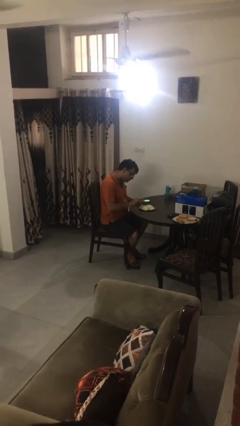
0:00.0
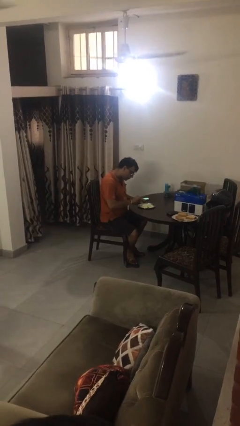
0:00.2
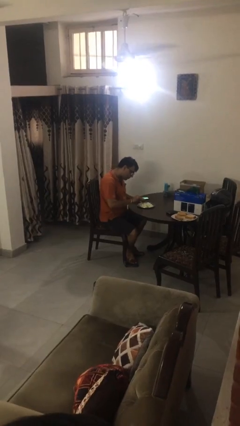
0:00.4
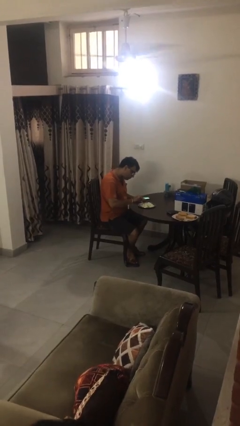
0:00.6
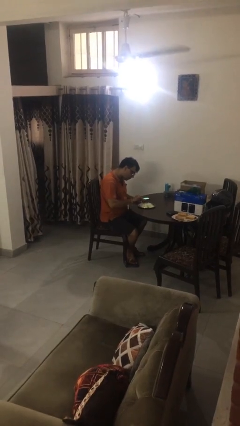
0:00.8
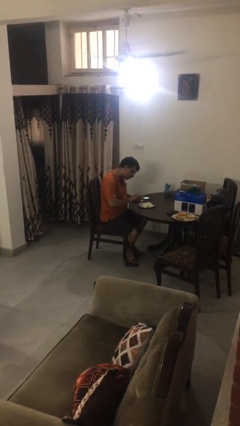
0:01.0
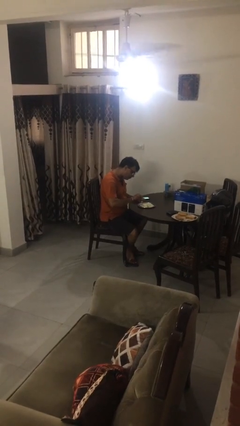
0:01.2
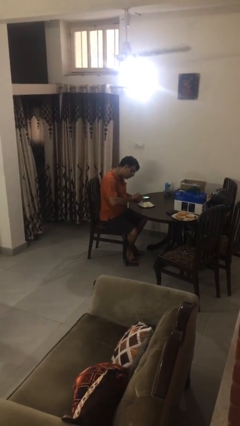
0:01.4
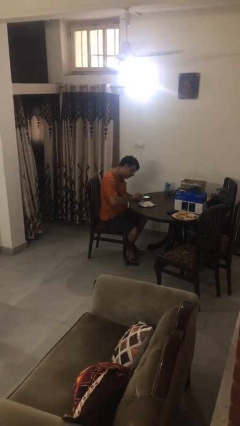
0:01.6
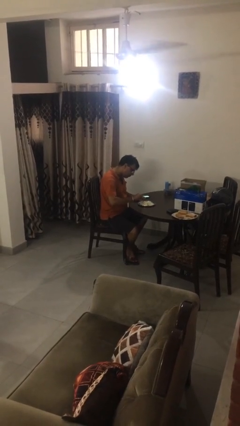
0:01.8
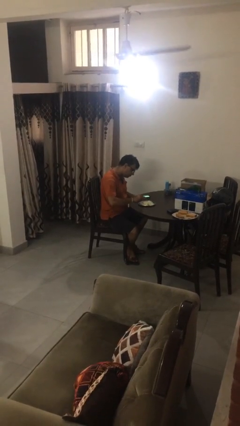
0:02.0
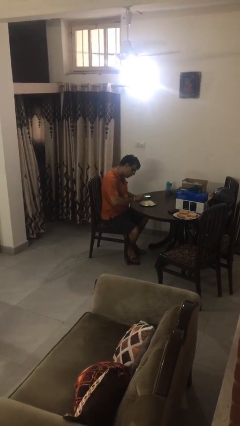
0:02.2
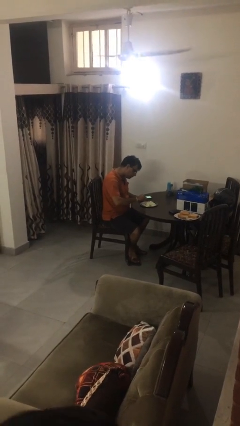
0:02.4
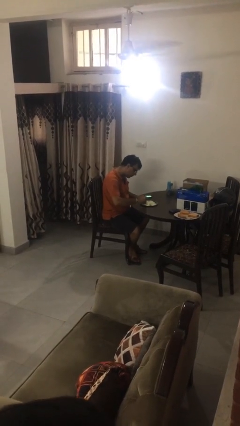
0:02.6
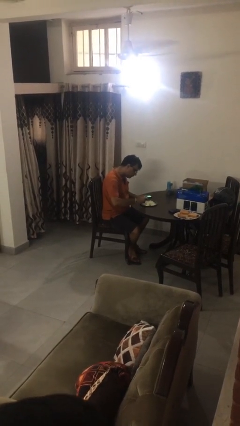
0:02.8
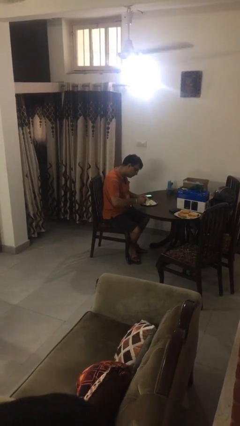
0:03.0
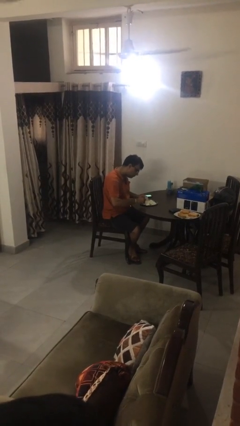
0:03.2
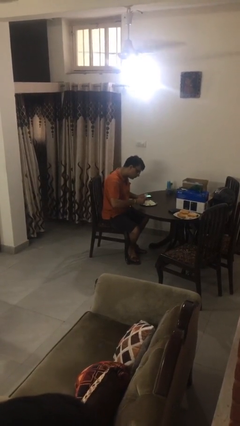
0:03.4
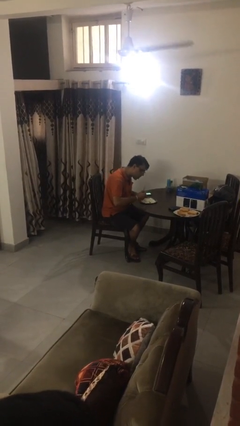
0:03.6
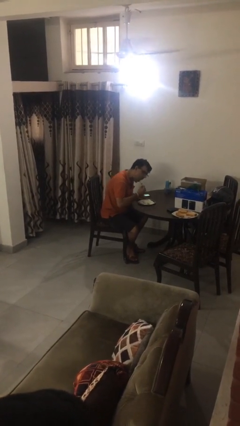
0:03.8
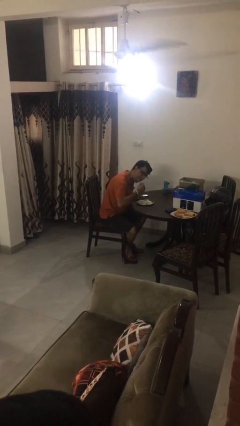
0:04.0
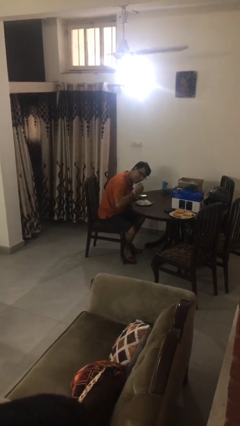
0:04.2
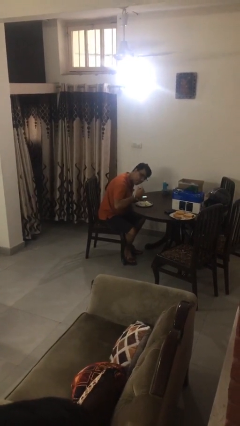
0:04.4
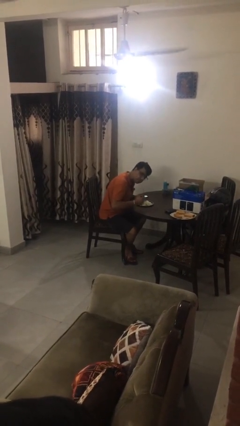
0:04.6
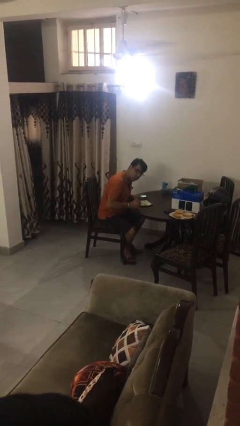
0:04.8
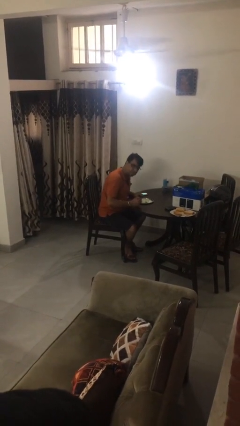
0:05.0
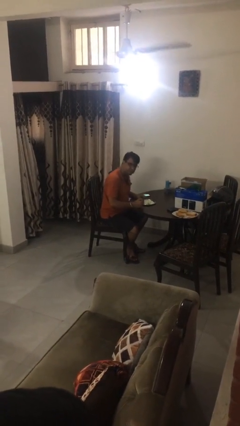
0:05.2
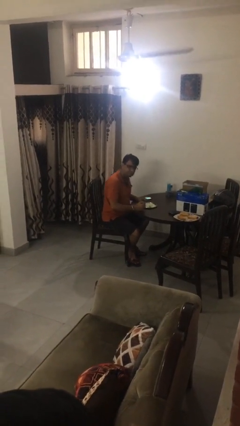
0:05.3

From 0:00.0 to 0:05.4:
person eats with utensil

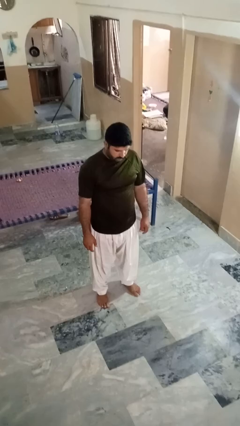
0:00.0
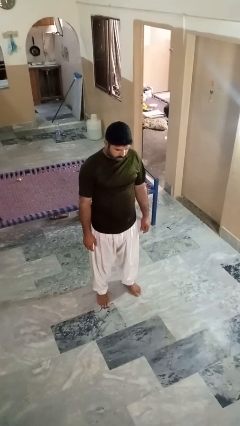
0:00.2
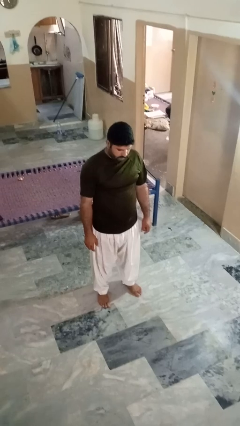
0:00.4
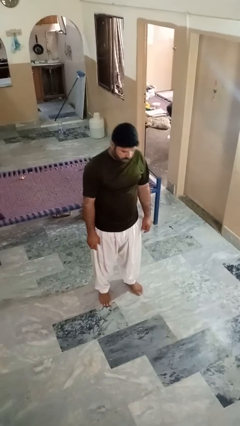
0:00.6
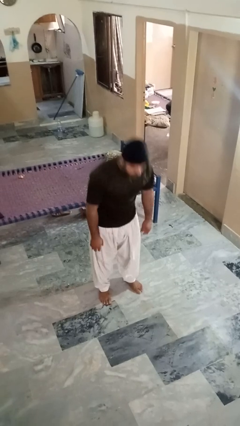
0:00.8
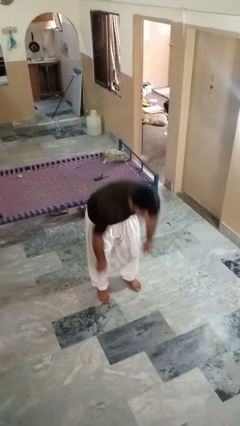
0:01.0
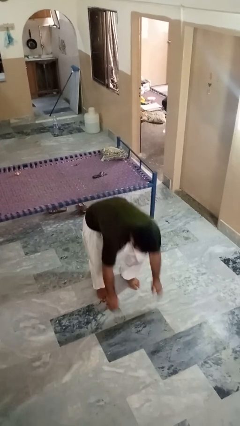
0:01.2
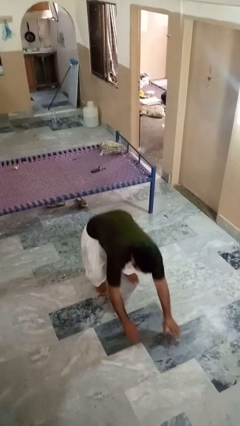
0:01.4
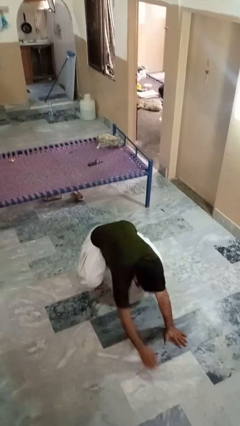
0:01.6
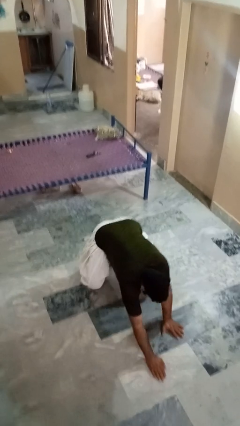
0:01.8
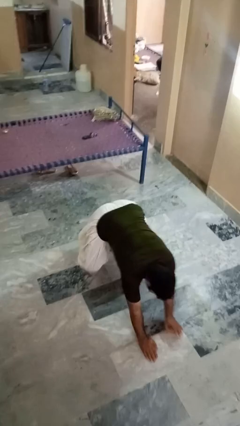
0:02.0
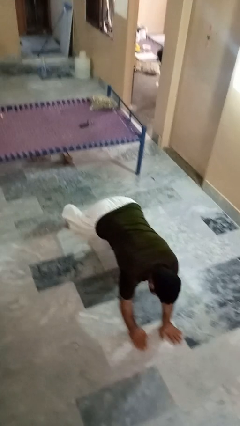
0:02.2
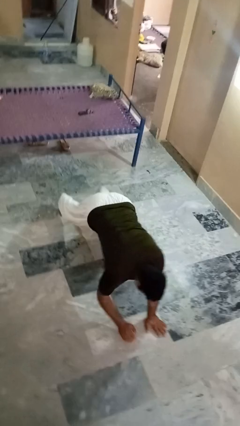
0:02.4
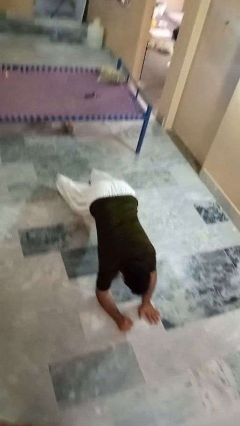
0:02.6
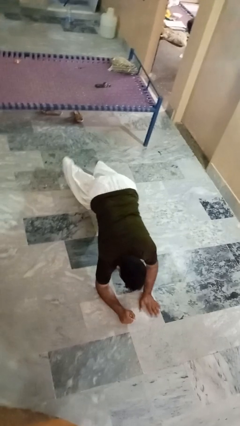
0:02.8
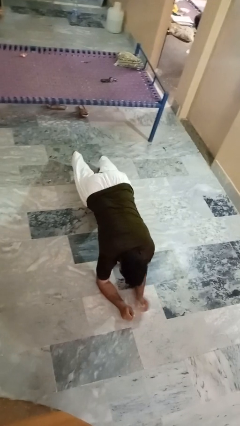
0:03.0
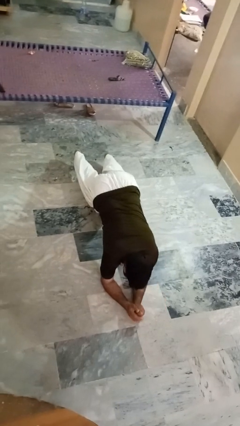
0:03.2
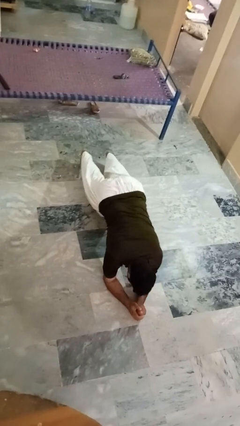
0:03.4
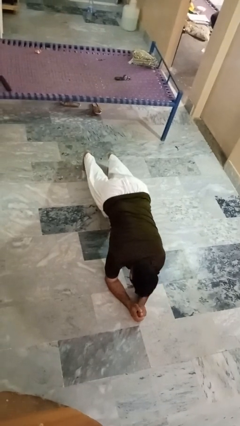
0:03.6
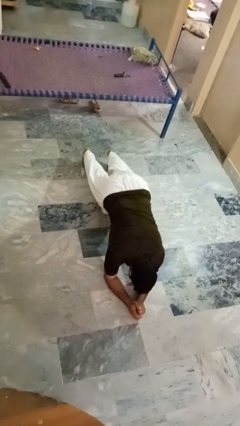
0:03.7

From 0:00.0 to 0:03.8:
person exercises with plank

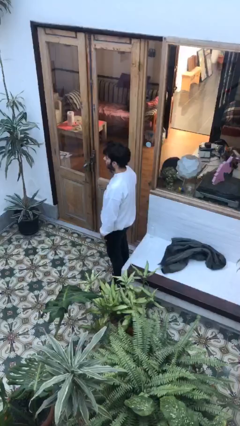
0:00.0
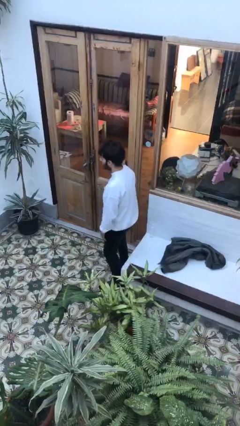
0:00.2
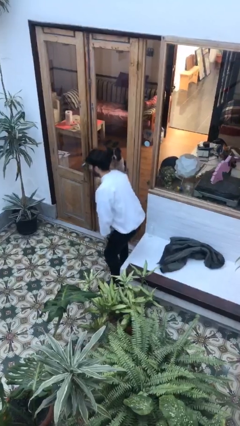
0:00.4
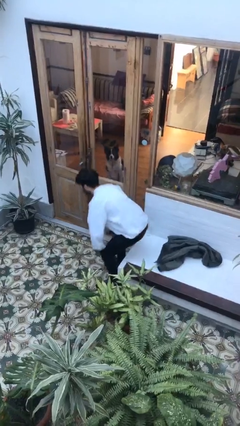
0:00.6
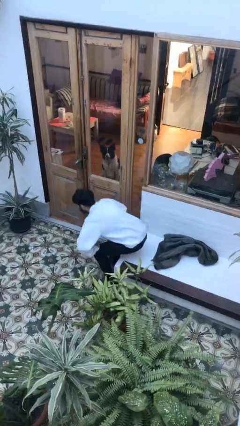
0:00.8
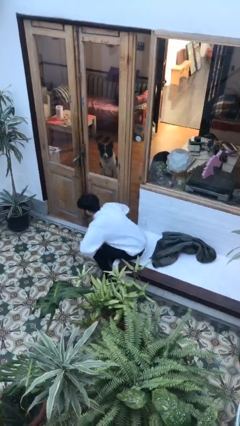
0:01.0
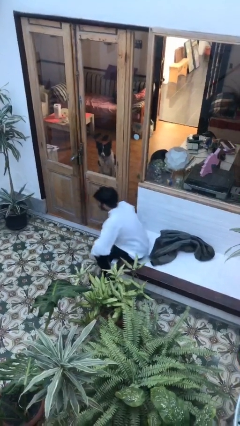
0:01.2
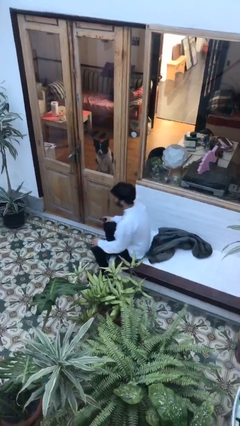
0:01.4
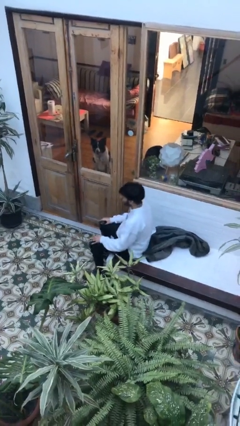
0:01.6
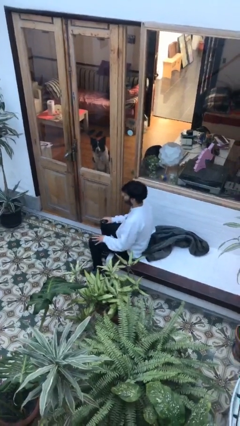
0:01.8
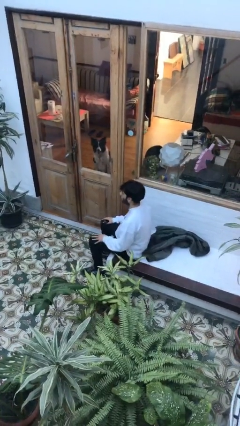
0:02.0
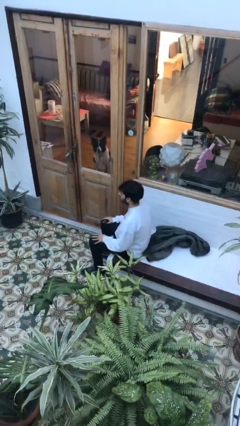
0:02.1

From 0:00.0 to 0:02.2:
person sits down

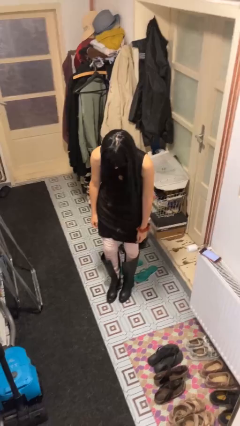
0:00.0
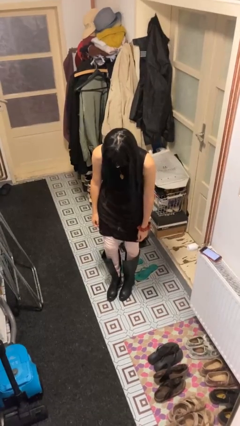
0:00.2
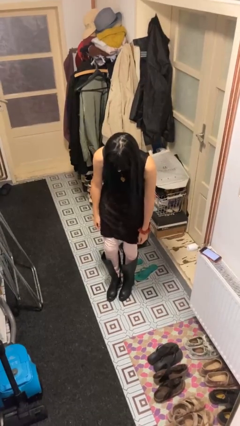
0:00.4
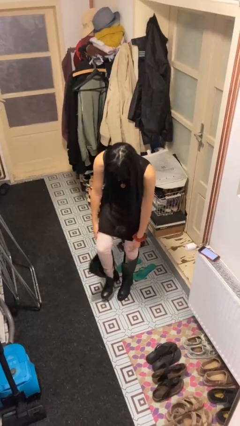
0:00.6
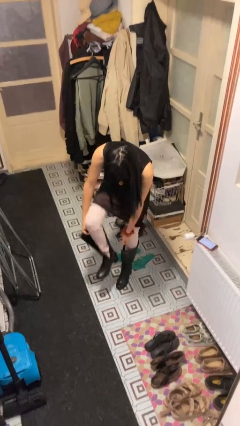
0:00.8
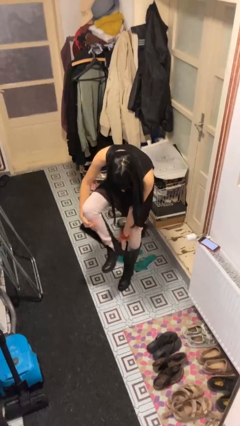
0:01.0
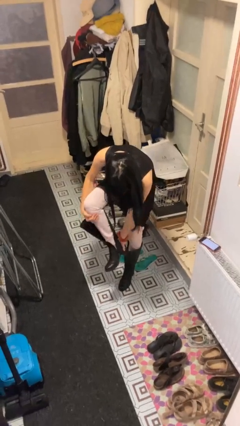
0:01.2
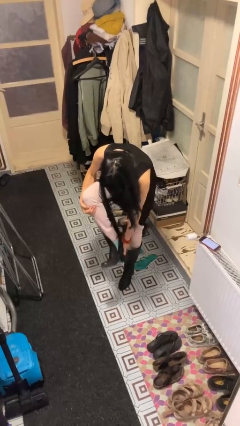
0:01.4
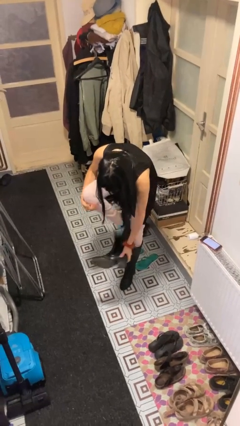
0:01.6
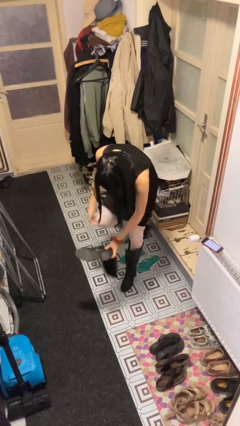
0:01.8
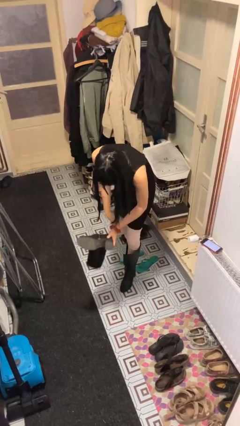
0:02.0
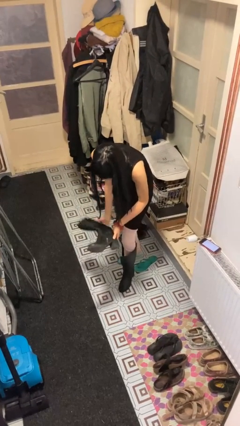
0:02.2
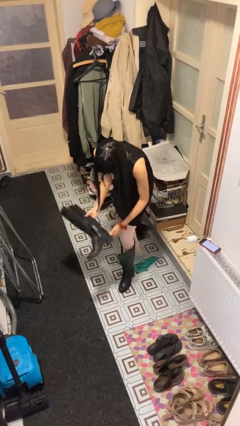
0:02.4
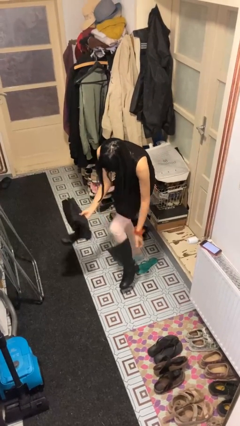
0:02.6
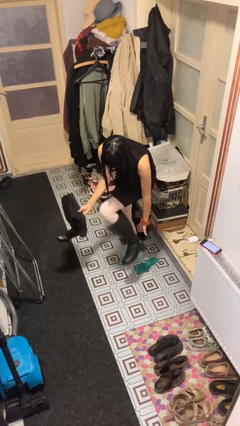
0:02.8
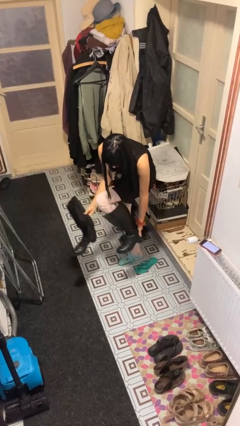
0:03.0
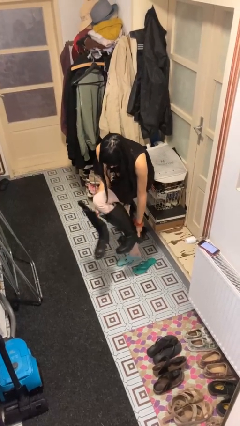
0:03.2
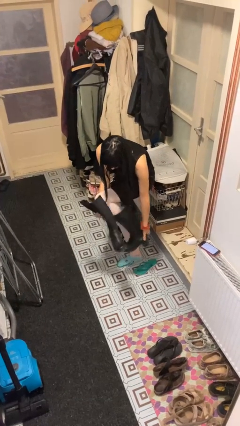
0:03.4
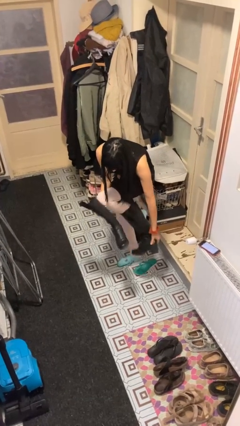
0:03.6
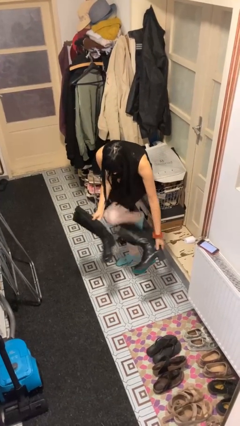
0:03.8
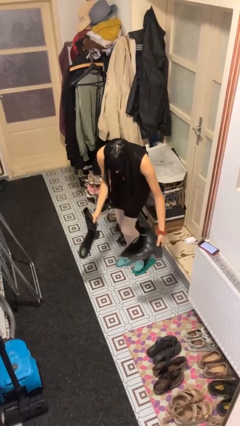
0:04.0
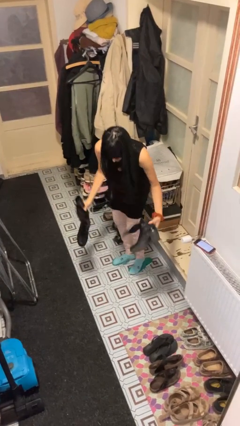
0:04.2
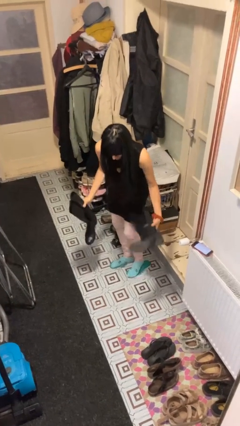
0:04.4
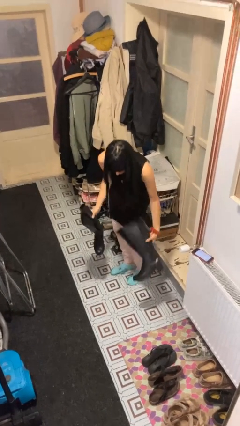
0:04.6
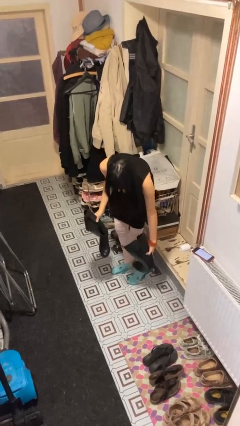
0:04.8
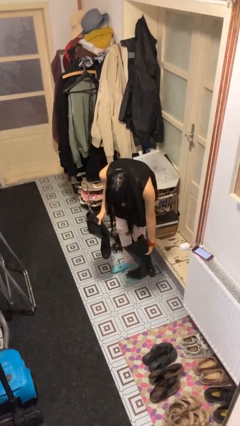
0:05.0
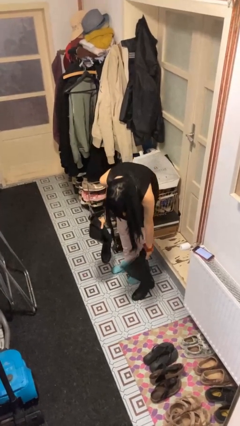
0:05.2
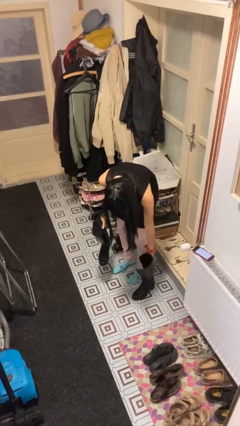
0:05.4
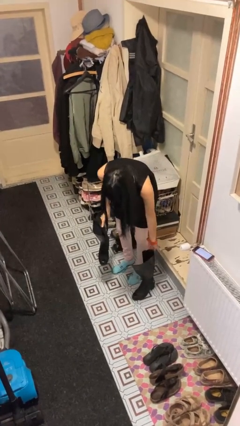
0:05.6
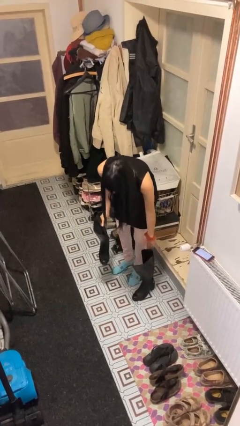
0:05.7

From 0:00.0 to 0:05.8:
person takes off boots

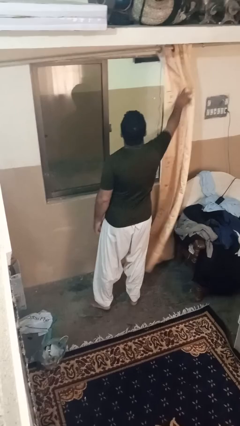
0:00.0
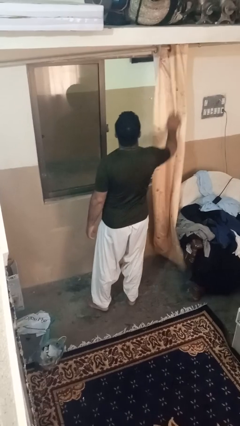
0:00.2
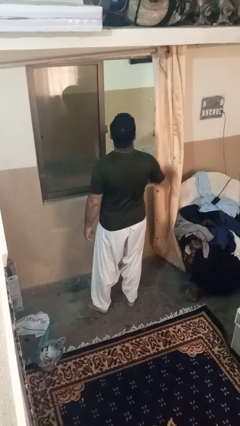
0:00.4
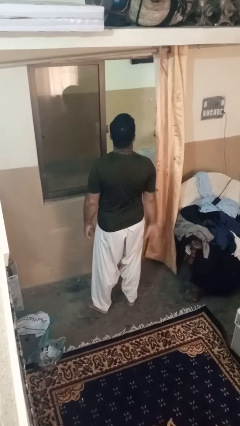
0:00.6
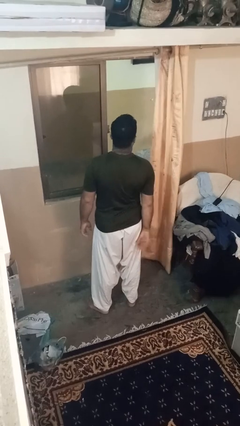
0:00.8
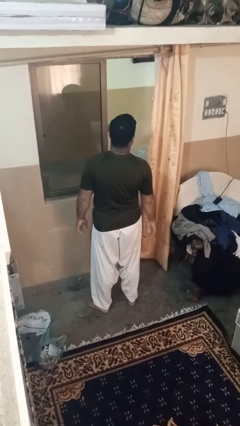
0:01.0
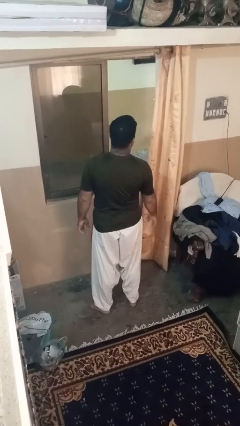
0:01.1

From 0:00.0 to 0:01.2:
person closes curtains
